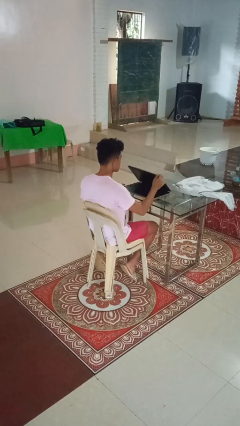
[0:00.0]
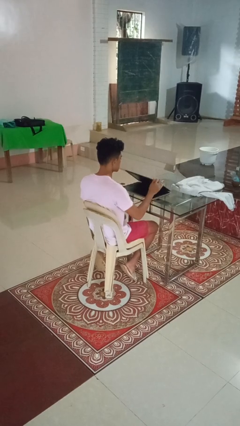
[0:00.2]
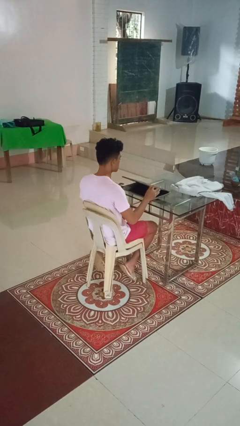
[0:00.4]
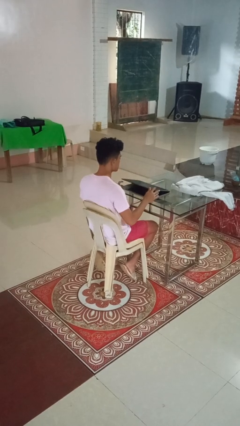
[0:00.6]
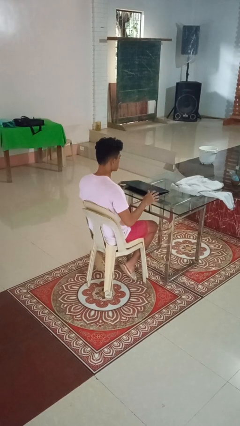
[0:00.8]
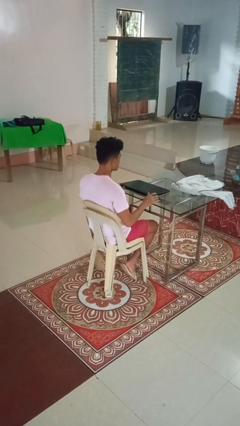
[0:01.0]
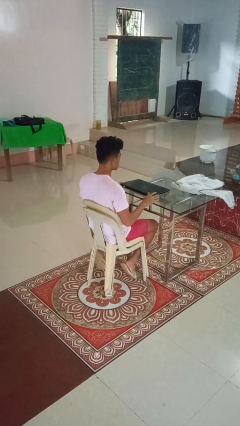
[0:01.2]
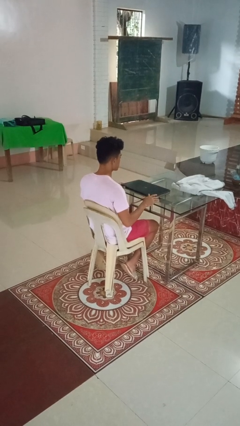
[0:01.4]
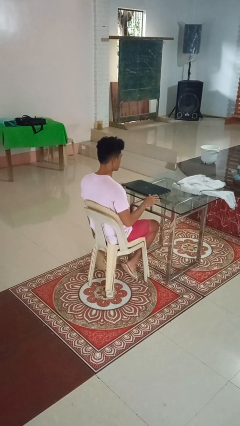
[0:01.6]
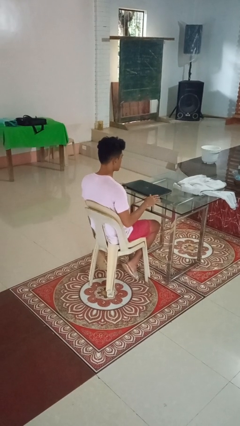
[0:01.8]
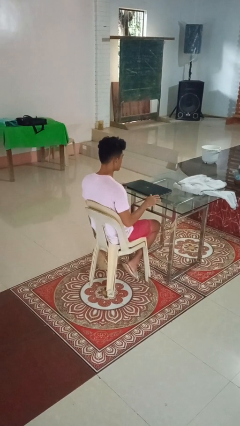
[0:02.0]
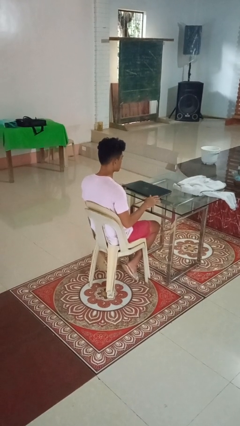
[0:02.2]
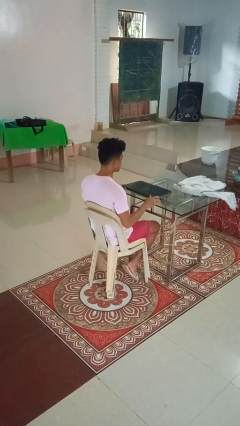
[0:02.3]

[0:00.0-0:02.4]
person closes laptop

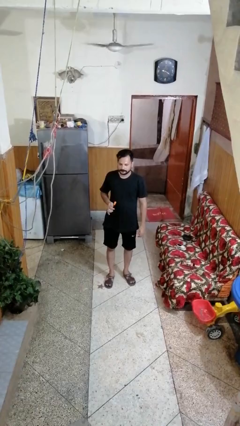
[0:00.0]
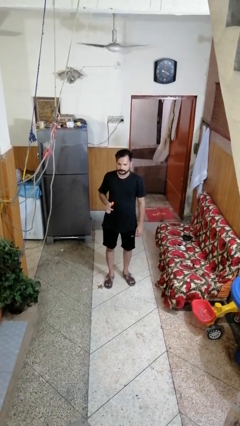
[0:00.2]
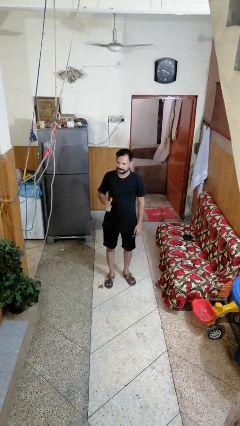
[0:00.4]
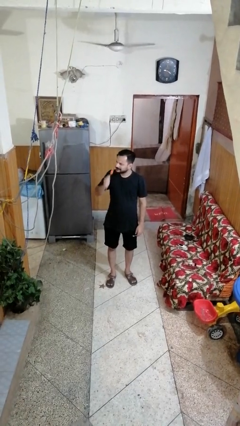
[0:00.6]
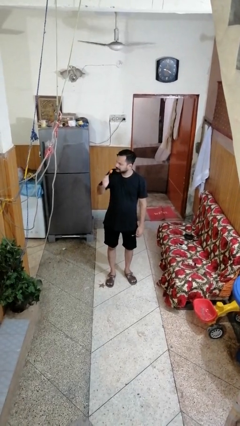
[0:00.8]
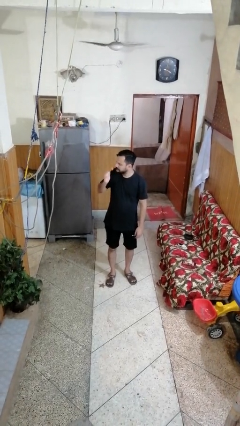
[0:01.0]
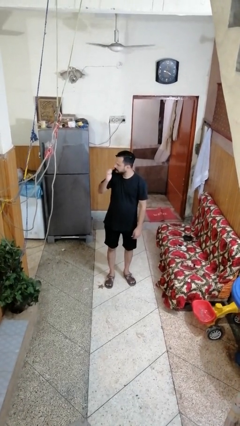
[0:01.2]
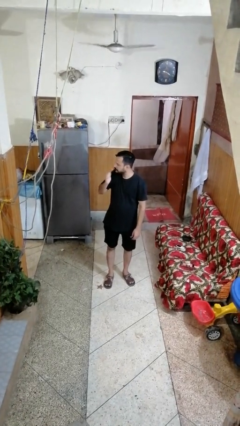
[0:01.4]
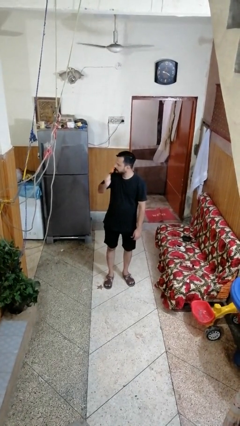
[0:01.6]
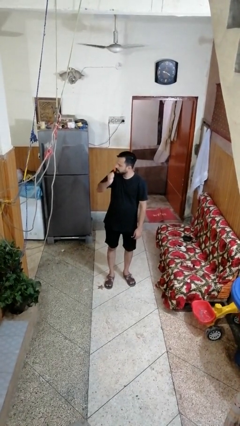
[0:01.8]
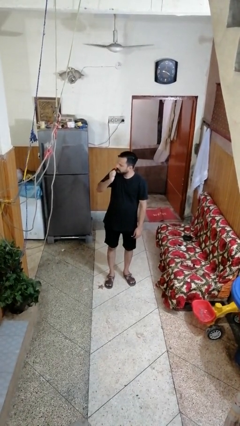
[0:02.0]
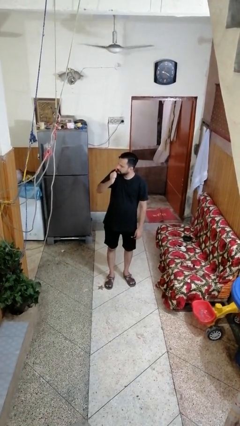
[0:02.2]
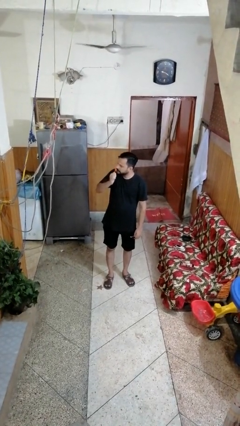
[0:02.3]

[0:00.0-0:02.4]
person brushes teeth

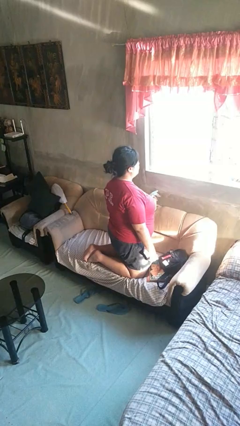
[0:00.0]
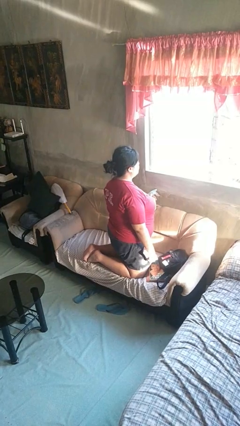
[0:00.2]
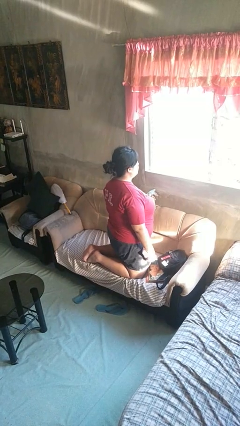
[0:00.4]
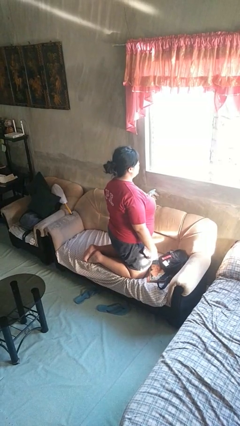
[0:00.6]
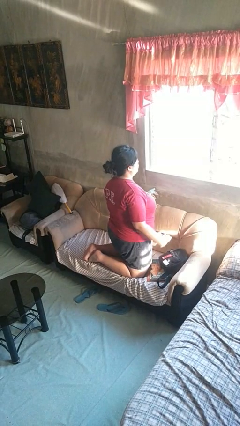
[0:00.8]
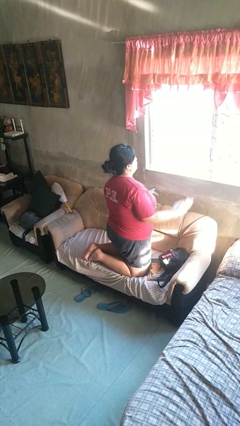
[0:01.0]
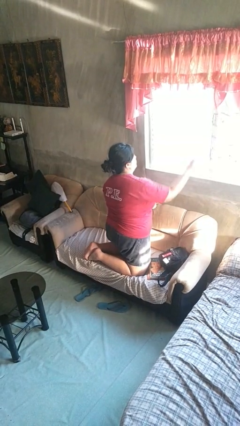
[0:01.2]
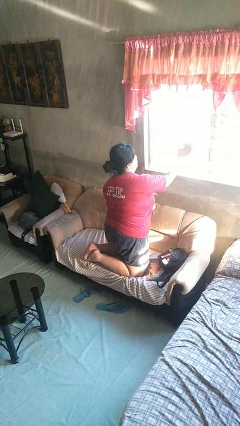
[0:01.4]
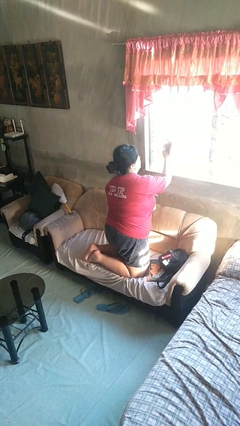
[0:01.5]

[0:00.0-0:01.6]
person washes window

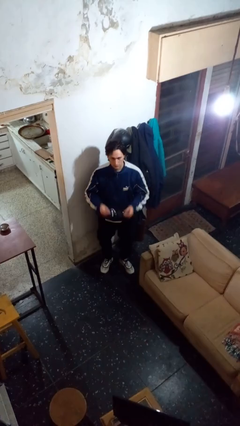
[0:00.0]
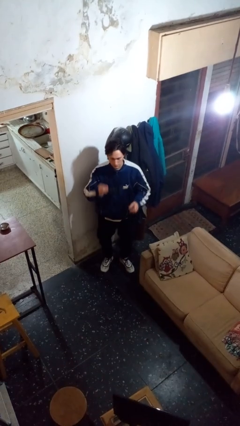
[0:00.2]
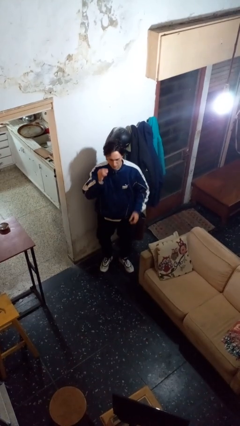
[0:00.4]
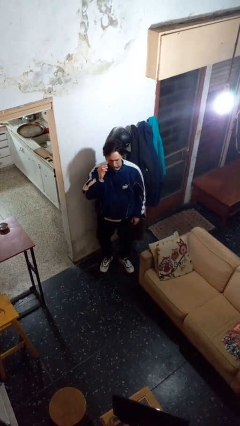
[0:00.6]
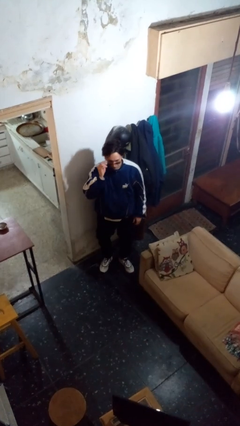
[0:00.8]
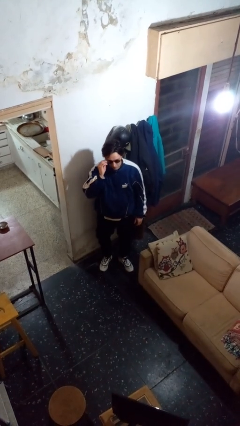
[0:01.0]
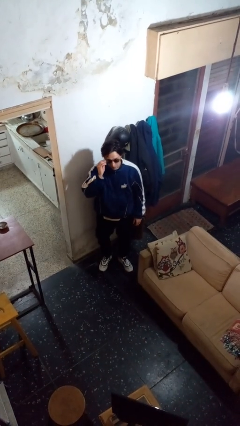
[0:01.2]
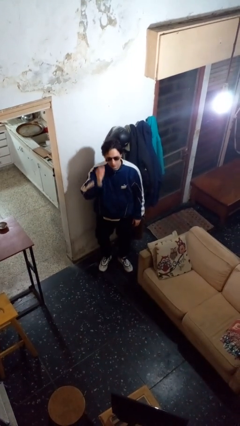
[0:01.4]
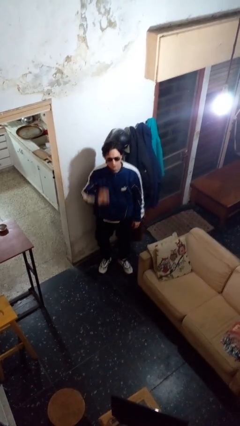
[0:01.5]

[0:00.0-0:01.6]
person puts on sunglasses

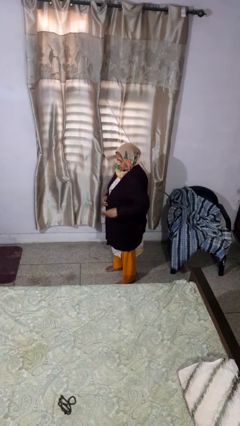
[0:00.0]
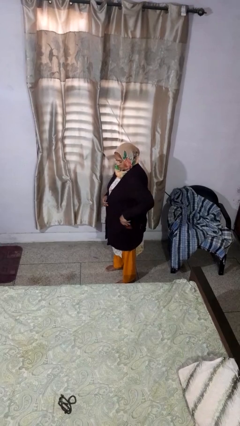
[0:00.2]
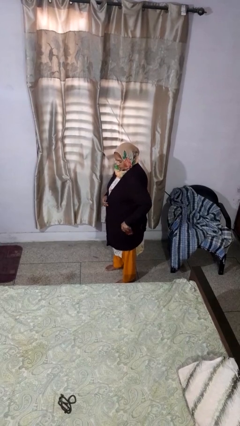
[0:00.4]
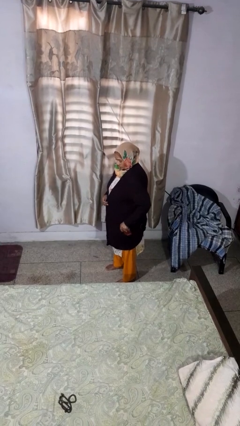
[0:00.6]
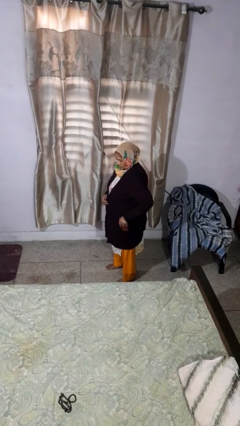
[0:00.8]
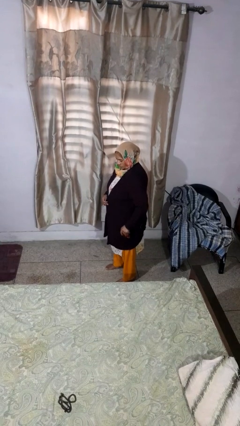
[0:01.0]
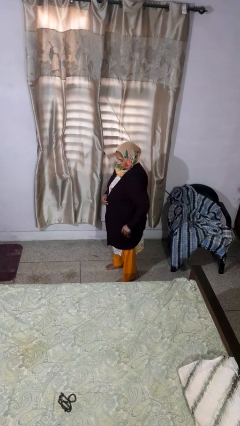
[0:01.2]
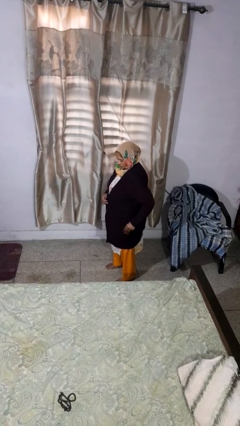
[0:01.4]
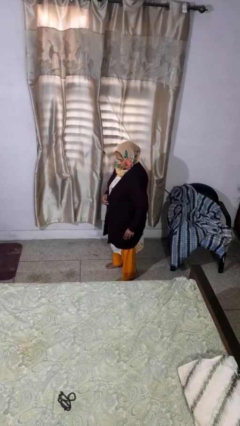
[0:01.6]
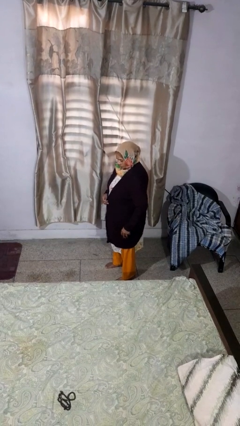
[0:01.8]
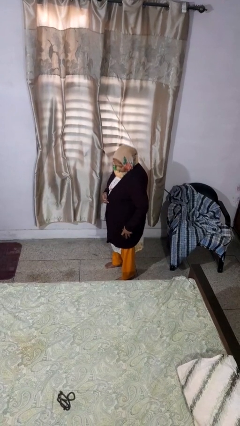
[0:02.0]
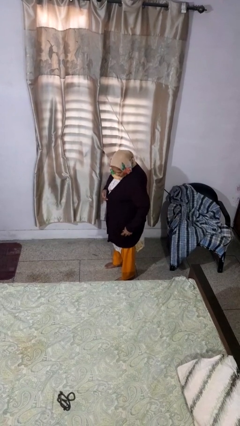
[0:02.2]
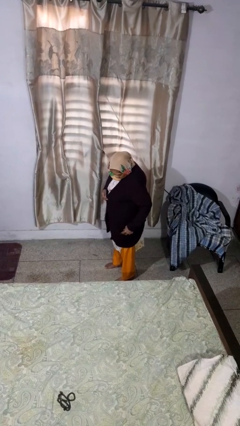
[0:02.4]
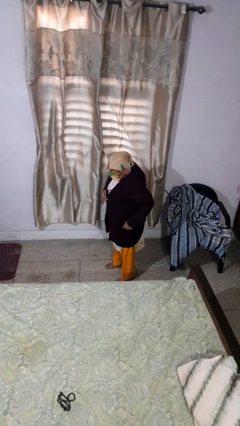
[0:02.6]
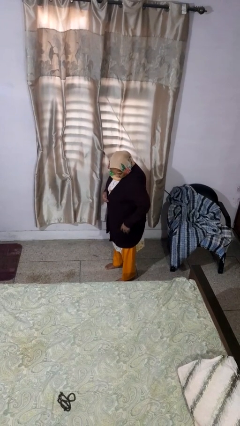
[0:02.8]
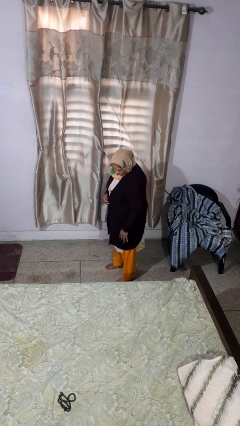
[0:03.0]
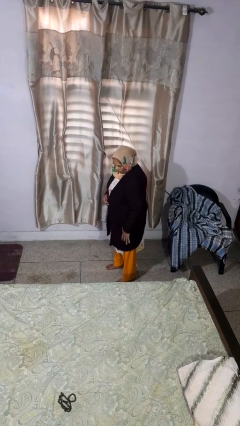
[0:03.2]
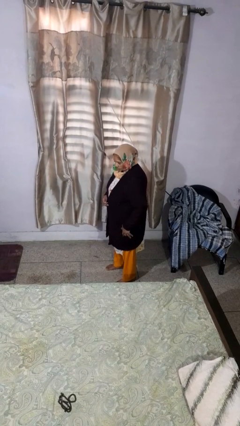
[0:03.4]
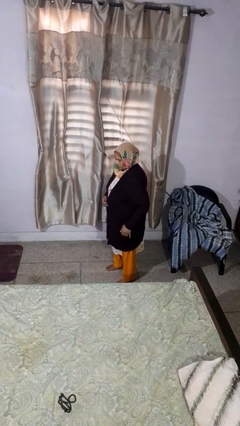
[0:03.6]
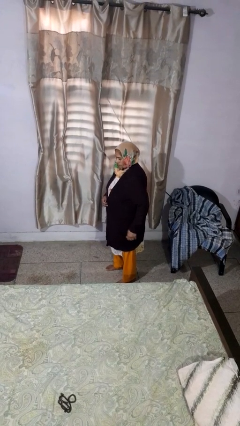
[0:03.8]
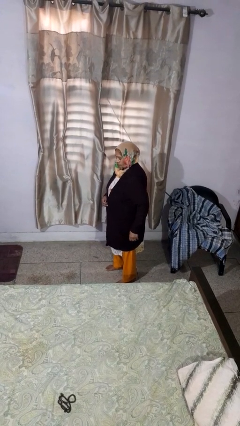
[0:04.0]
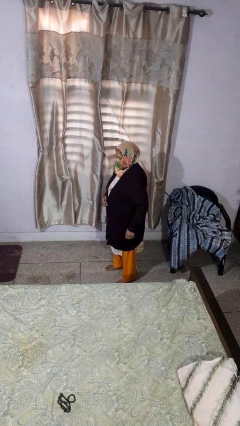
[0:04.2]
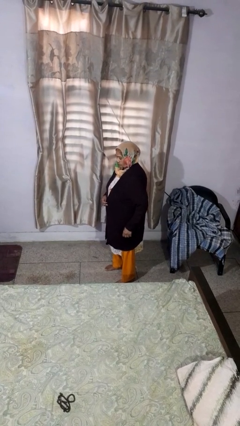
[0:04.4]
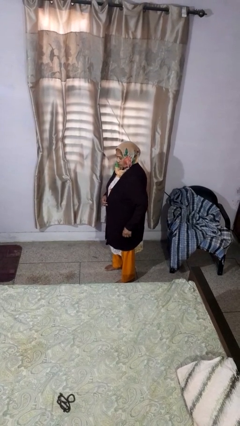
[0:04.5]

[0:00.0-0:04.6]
person puts phone into pocket

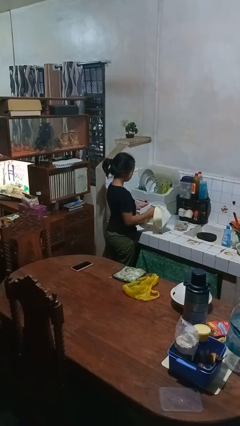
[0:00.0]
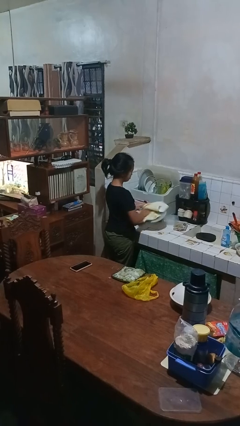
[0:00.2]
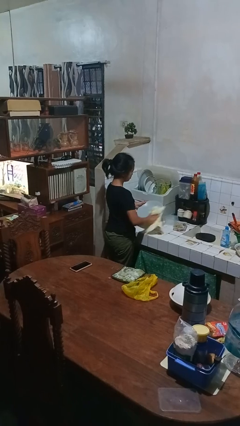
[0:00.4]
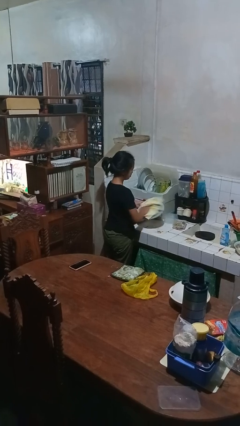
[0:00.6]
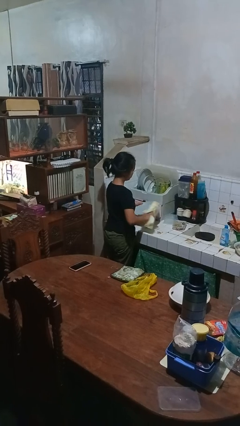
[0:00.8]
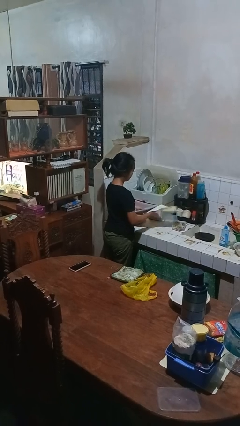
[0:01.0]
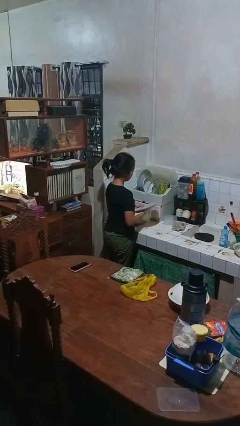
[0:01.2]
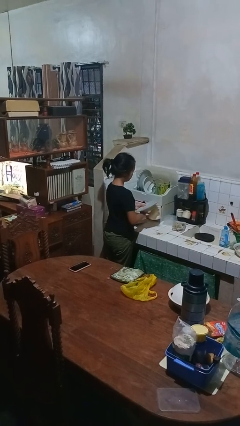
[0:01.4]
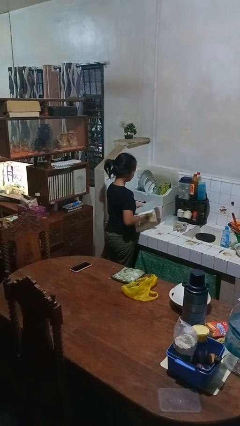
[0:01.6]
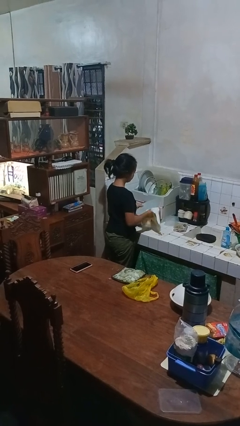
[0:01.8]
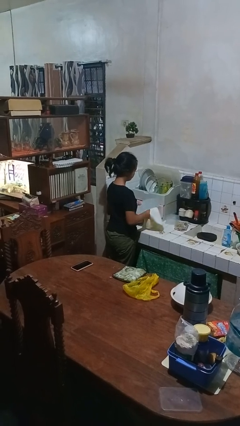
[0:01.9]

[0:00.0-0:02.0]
person dries dish

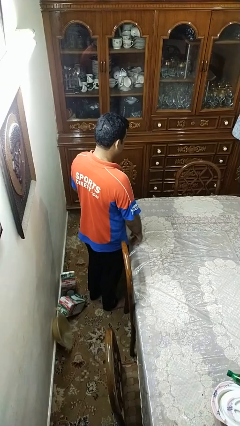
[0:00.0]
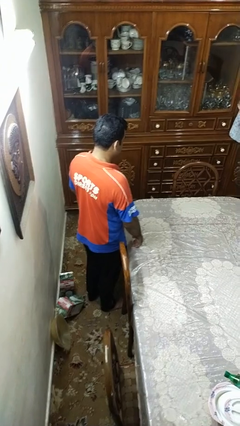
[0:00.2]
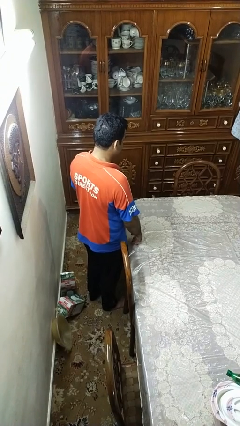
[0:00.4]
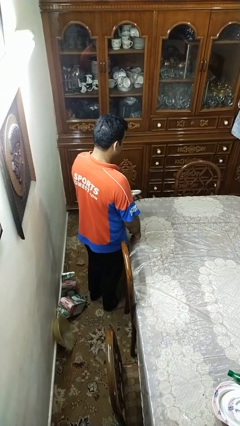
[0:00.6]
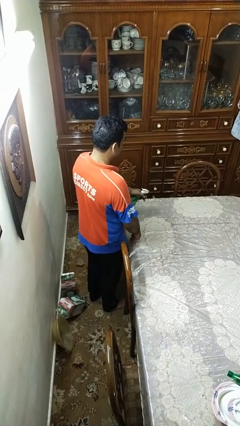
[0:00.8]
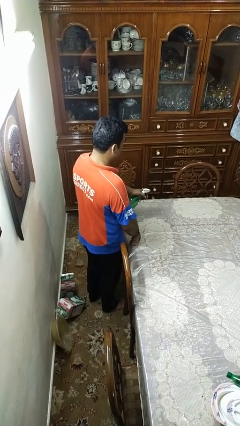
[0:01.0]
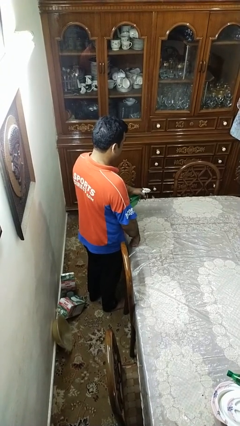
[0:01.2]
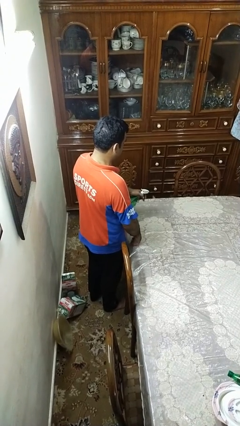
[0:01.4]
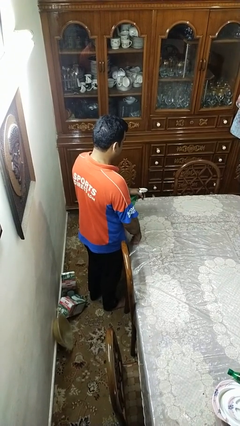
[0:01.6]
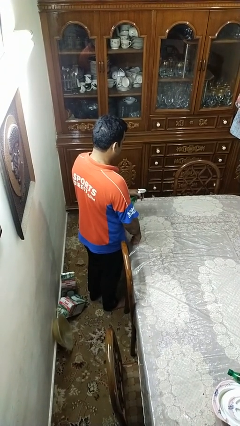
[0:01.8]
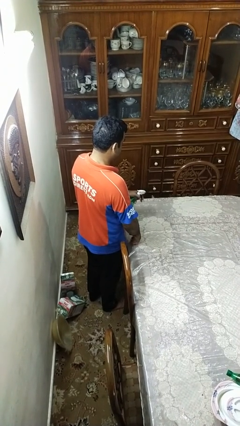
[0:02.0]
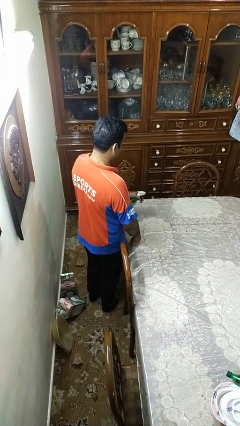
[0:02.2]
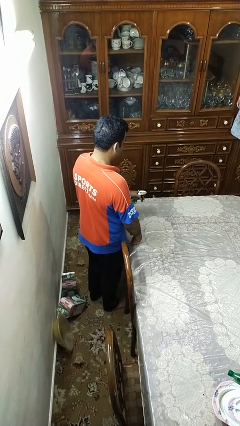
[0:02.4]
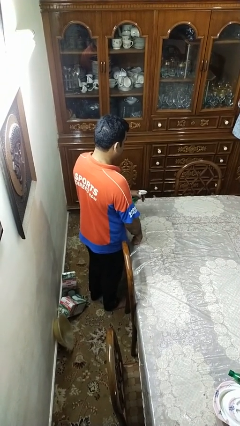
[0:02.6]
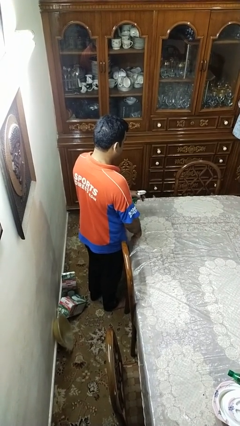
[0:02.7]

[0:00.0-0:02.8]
person sprays from bottle
